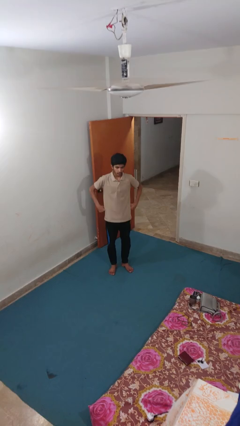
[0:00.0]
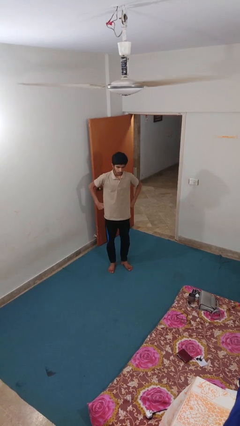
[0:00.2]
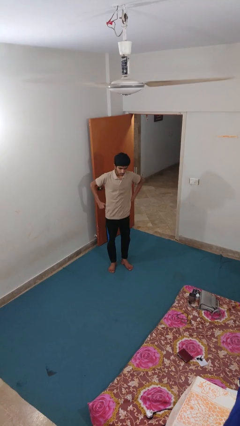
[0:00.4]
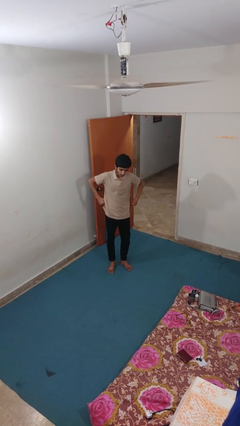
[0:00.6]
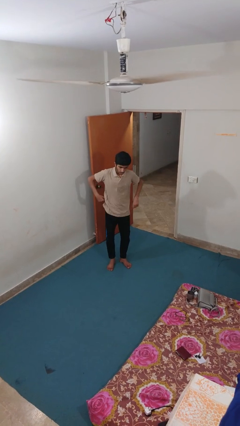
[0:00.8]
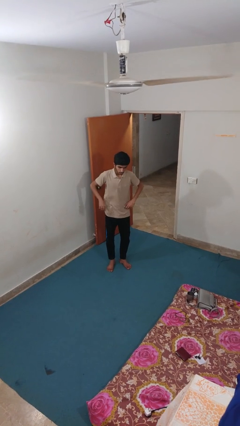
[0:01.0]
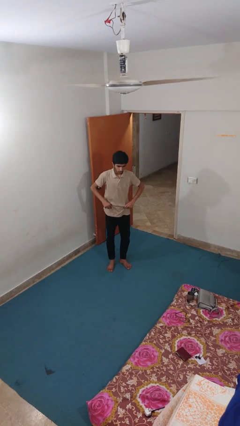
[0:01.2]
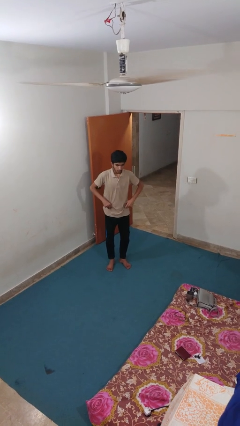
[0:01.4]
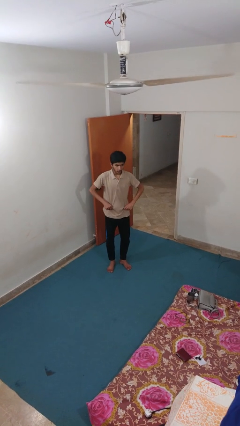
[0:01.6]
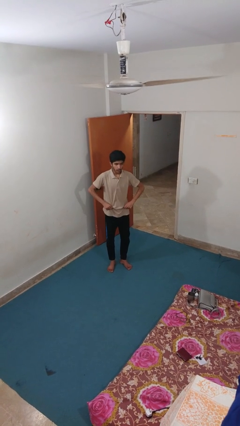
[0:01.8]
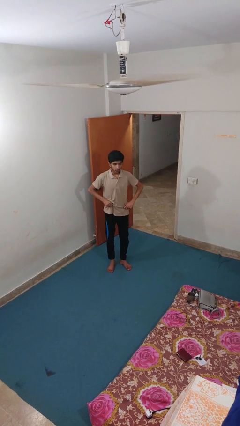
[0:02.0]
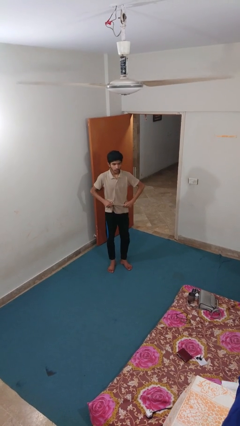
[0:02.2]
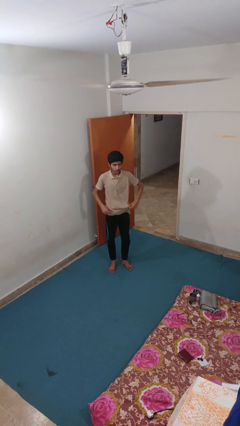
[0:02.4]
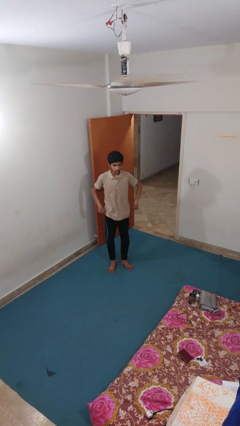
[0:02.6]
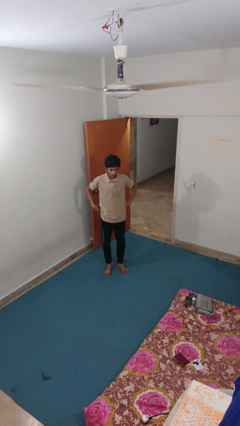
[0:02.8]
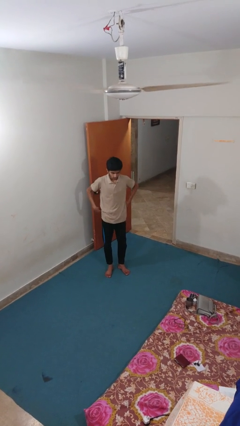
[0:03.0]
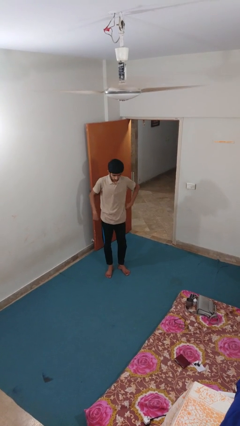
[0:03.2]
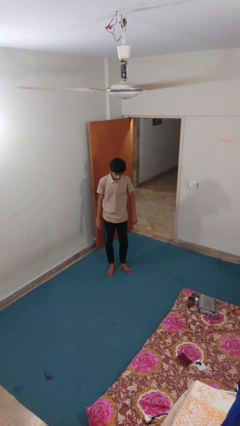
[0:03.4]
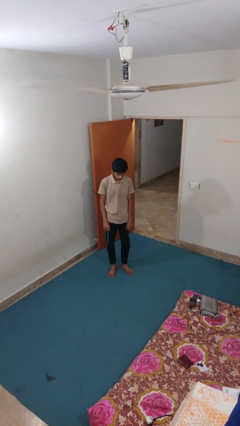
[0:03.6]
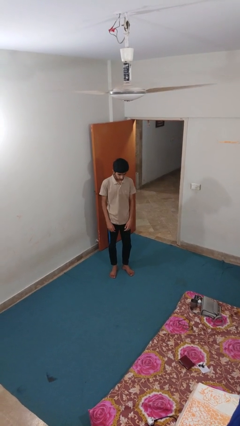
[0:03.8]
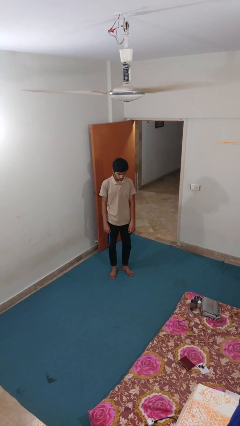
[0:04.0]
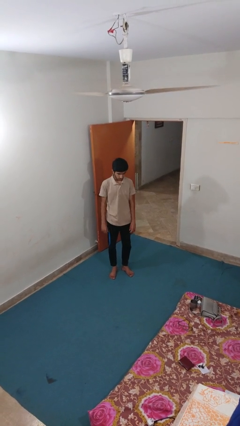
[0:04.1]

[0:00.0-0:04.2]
person hikes up pants

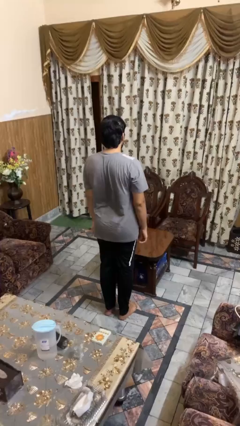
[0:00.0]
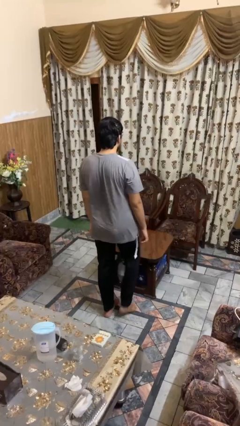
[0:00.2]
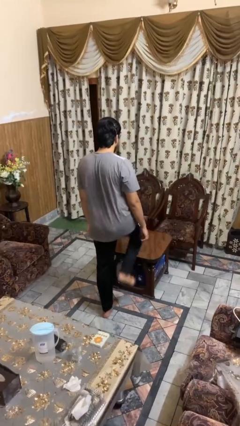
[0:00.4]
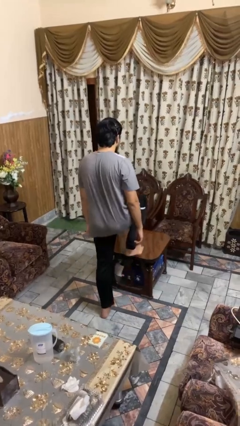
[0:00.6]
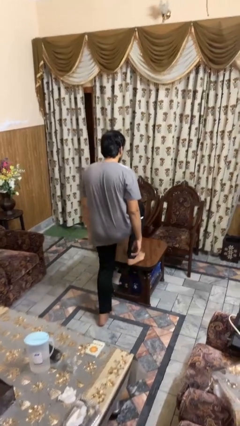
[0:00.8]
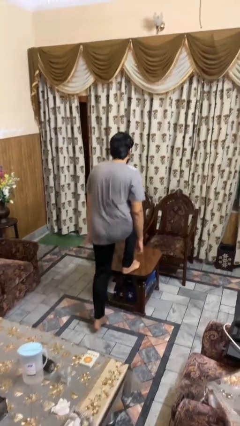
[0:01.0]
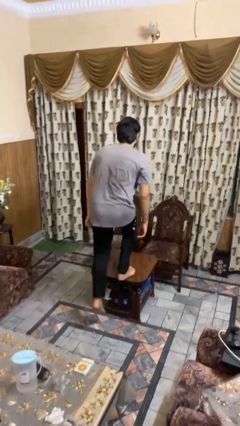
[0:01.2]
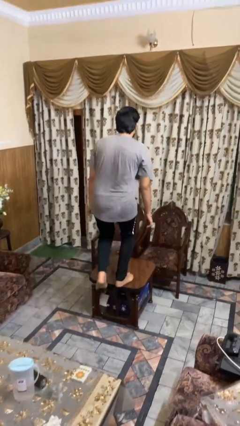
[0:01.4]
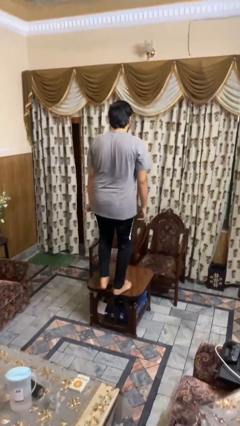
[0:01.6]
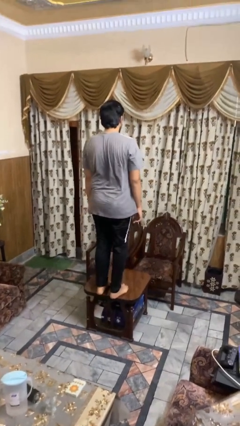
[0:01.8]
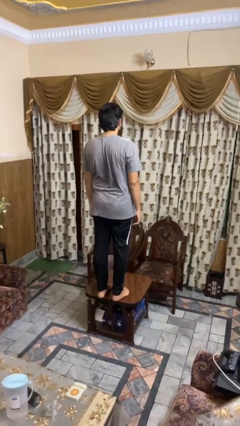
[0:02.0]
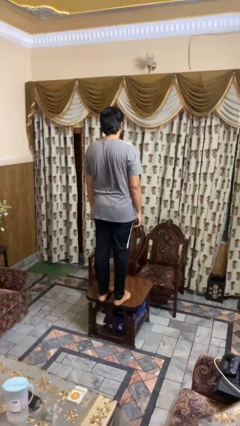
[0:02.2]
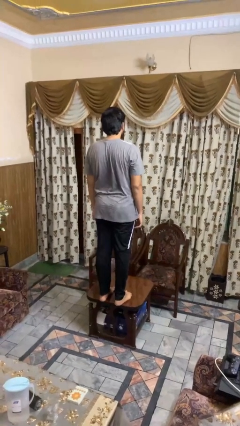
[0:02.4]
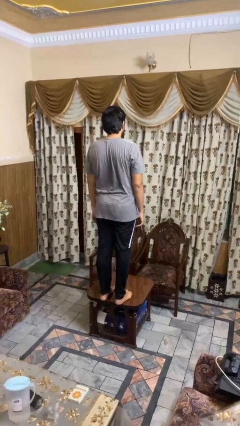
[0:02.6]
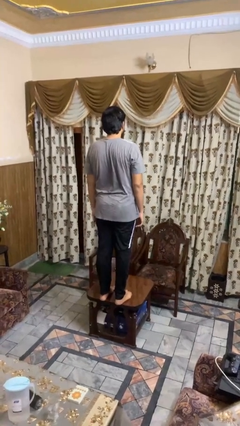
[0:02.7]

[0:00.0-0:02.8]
person climbs on table

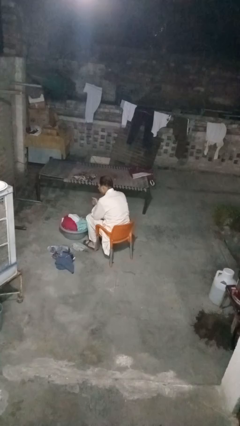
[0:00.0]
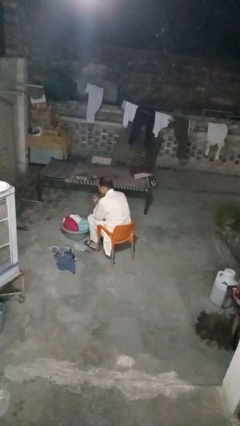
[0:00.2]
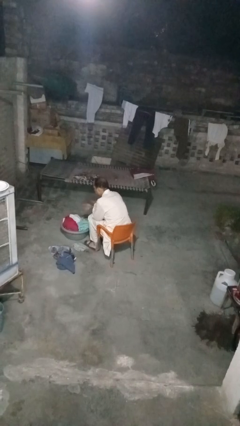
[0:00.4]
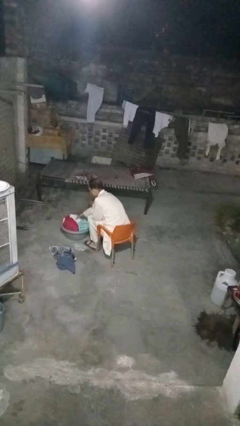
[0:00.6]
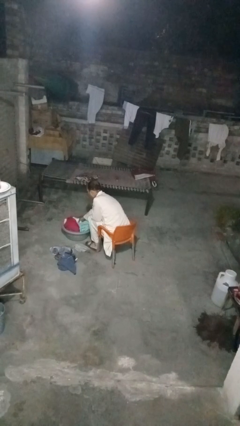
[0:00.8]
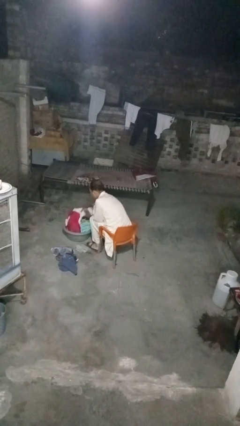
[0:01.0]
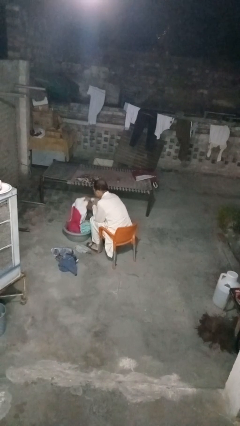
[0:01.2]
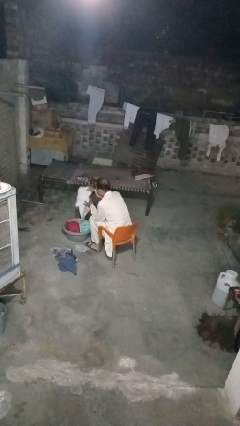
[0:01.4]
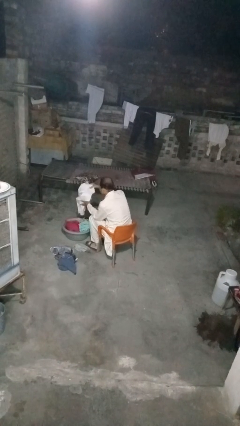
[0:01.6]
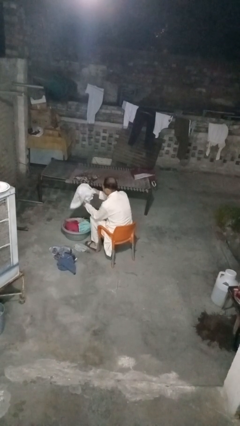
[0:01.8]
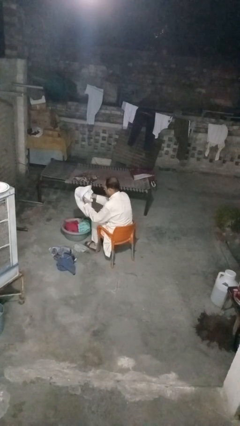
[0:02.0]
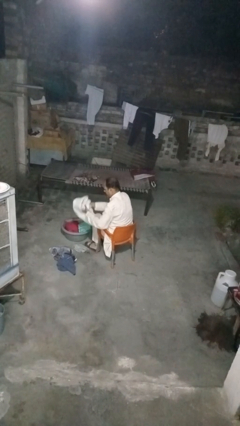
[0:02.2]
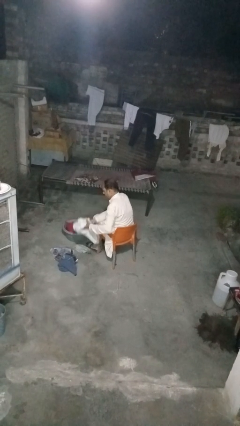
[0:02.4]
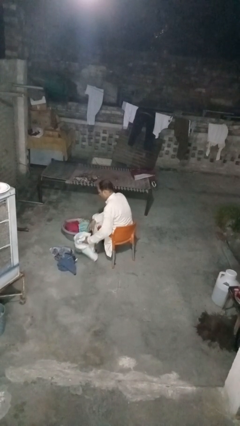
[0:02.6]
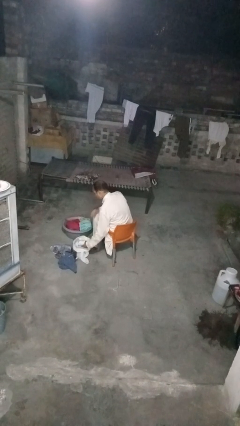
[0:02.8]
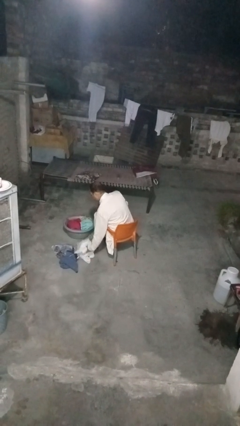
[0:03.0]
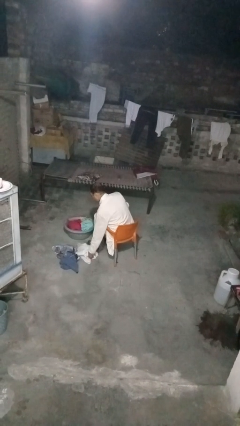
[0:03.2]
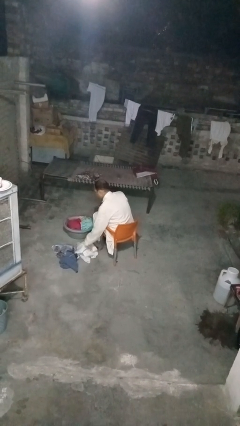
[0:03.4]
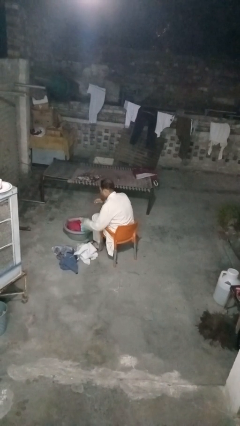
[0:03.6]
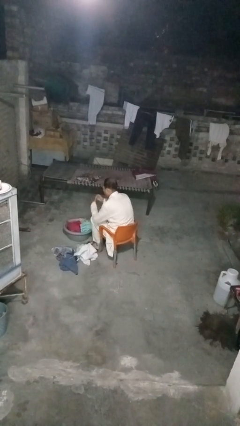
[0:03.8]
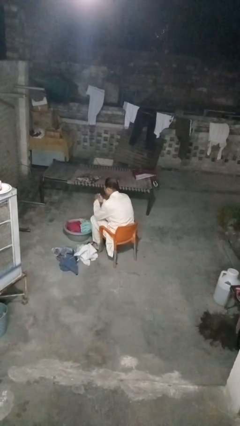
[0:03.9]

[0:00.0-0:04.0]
person takes object from basket

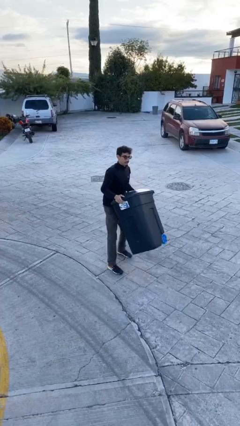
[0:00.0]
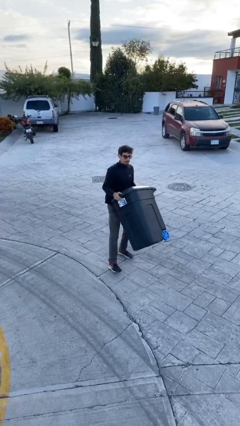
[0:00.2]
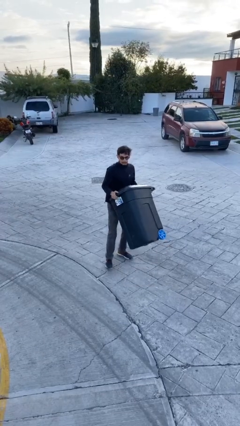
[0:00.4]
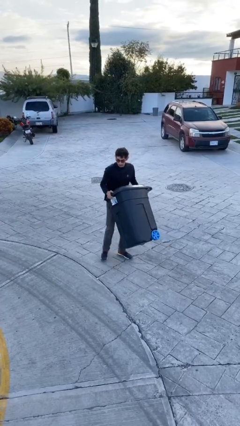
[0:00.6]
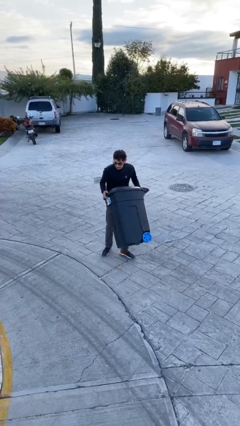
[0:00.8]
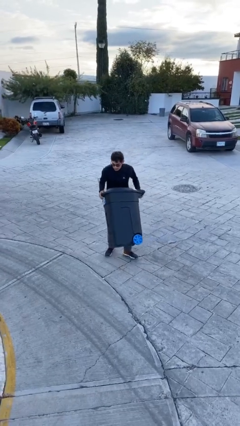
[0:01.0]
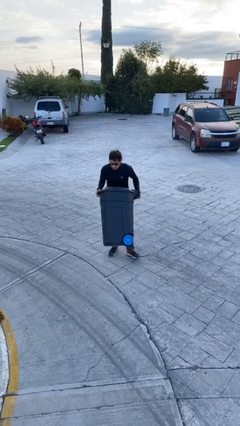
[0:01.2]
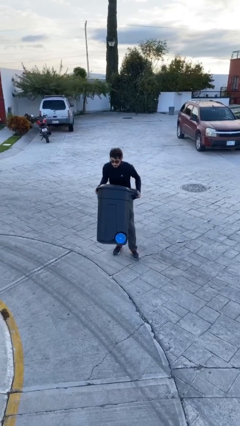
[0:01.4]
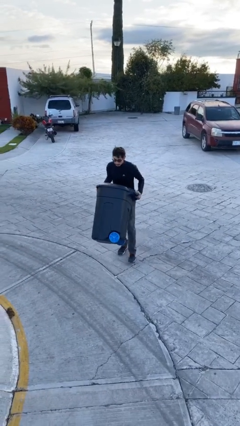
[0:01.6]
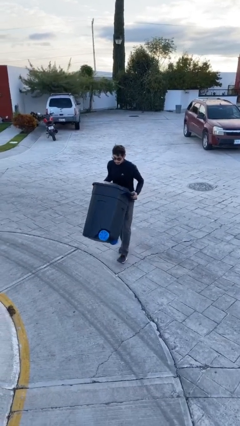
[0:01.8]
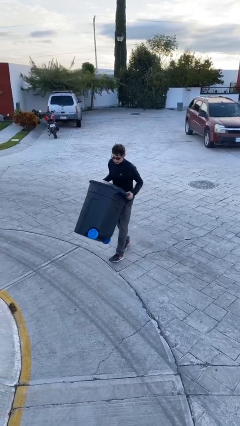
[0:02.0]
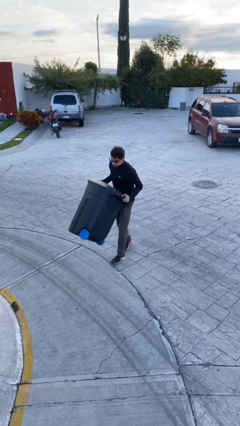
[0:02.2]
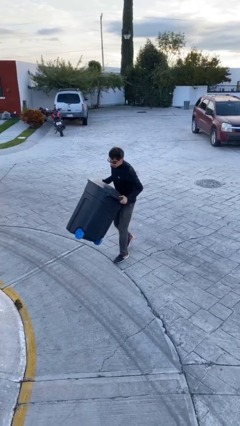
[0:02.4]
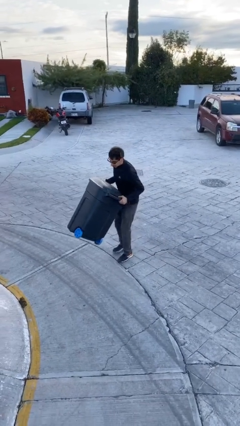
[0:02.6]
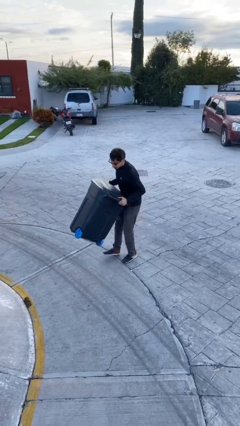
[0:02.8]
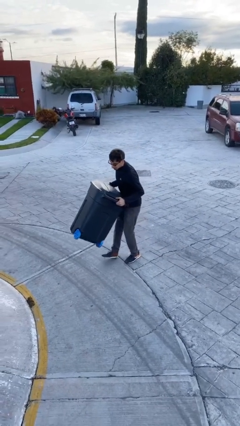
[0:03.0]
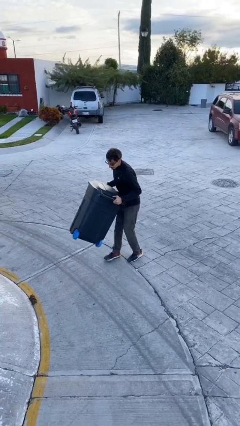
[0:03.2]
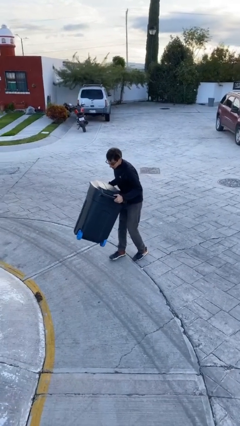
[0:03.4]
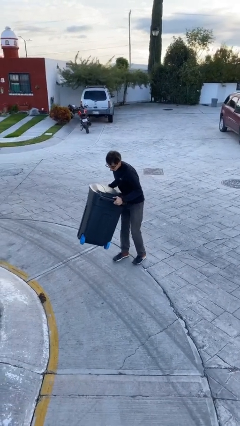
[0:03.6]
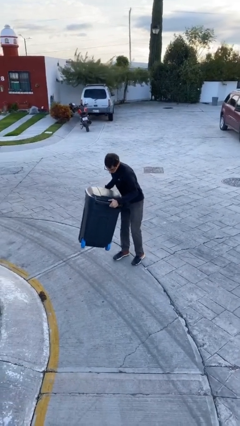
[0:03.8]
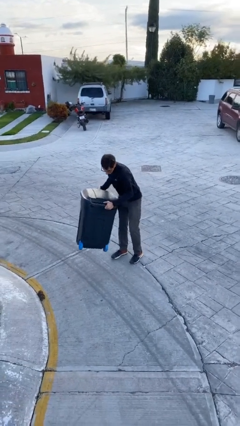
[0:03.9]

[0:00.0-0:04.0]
person carries heavy object

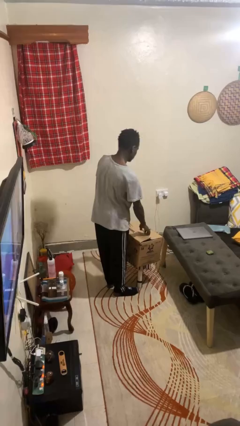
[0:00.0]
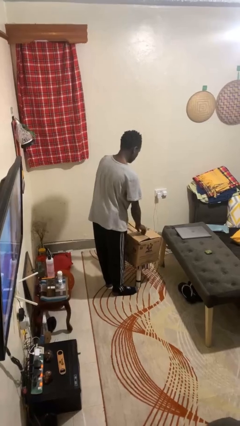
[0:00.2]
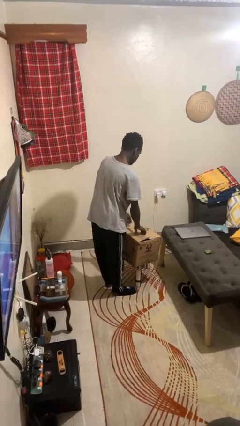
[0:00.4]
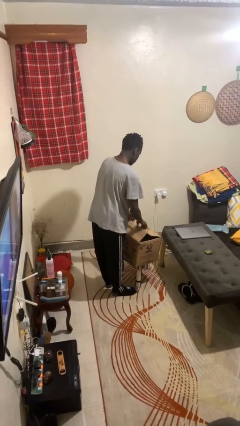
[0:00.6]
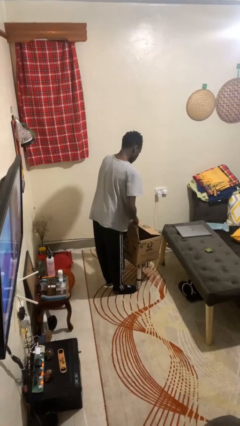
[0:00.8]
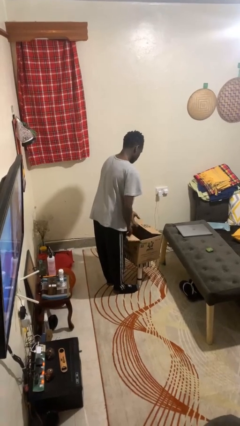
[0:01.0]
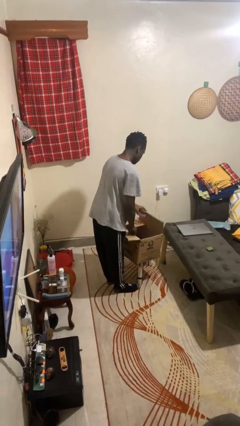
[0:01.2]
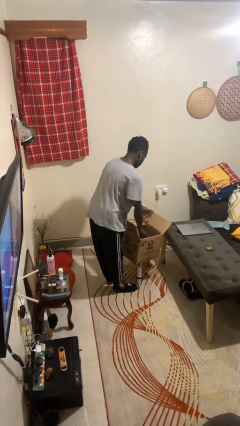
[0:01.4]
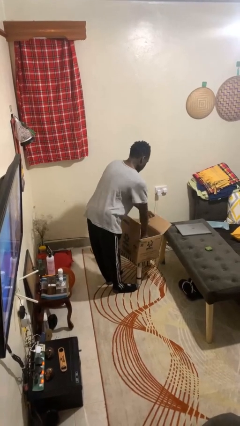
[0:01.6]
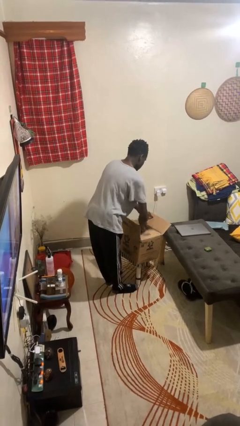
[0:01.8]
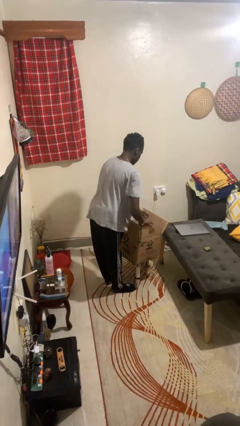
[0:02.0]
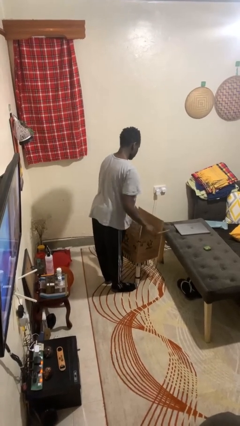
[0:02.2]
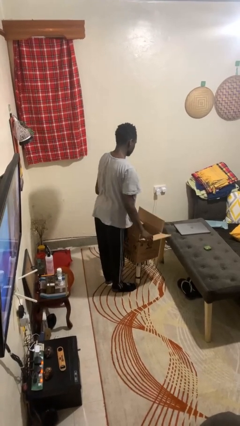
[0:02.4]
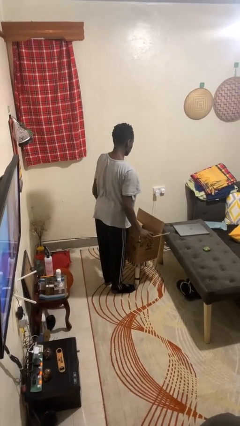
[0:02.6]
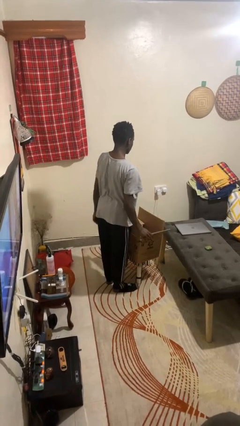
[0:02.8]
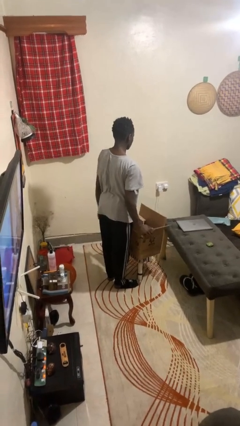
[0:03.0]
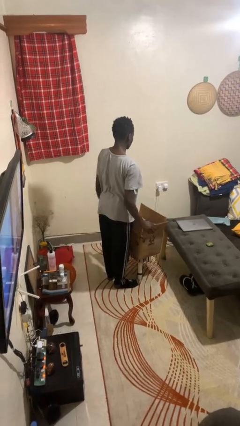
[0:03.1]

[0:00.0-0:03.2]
person opens box
